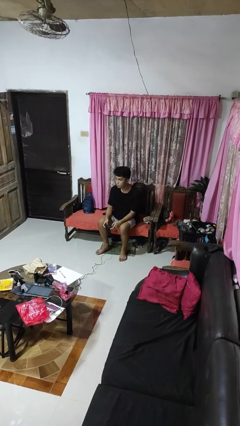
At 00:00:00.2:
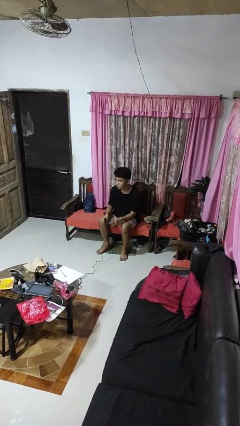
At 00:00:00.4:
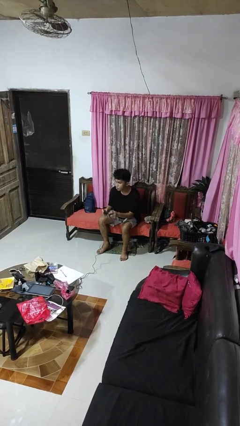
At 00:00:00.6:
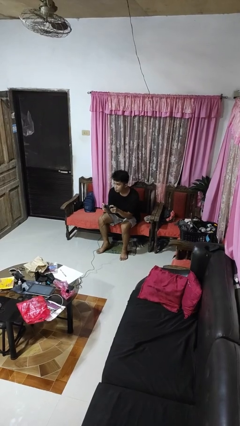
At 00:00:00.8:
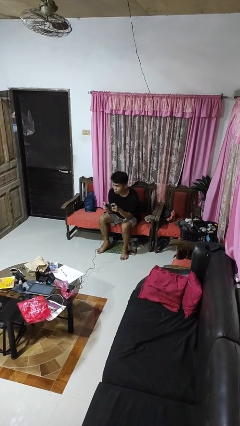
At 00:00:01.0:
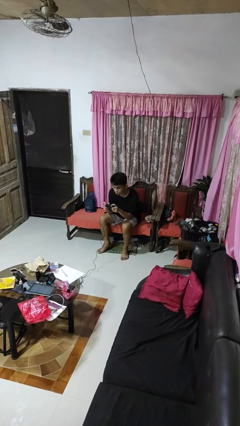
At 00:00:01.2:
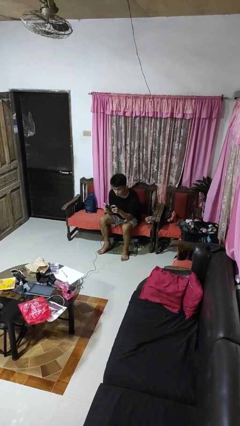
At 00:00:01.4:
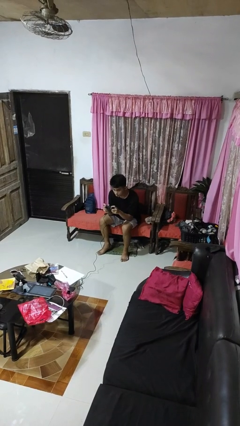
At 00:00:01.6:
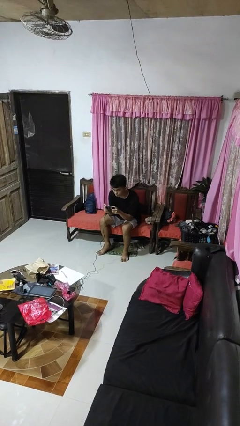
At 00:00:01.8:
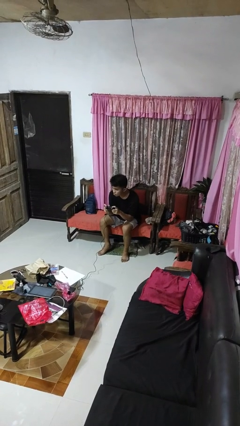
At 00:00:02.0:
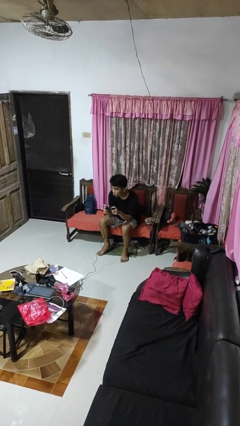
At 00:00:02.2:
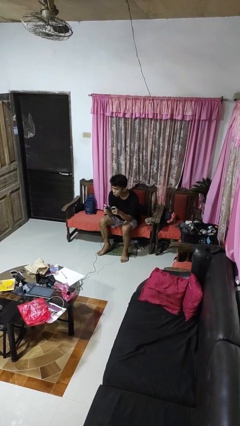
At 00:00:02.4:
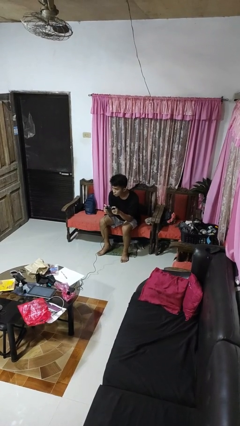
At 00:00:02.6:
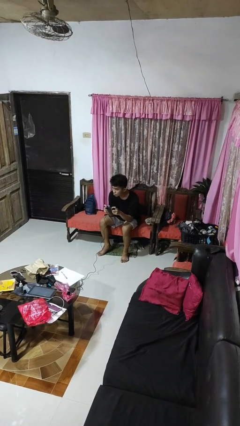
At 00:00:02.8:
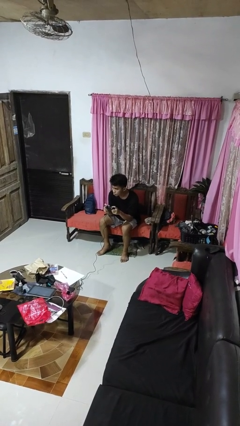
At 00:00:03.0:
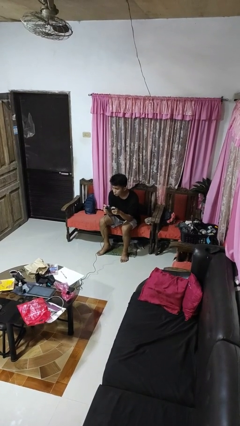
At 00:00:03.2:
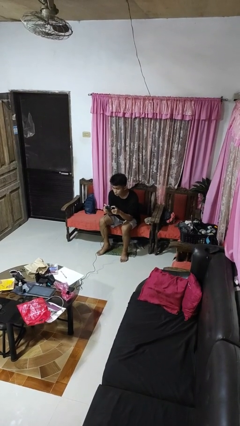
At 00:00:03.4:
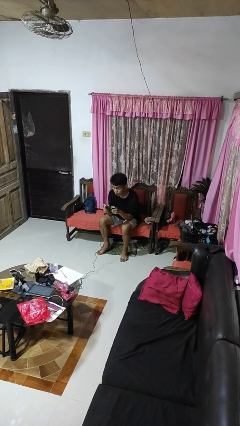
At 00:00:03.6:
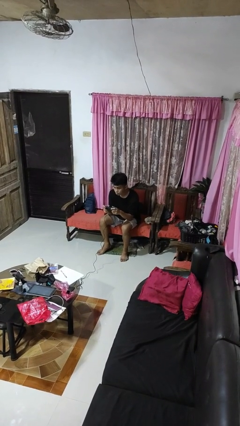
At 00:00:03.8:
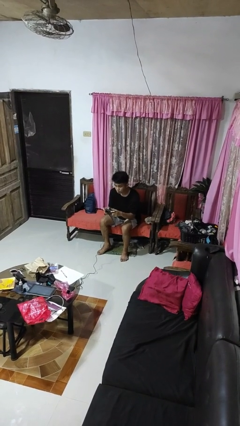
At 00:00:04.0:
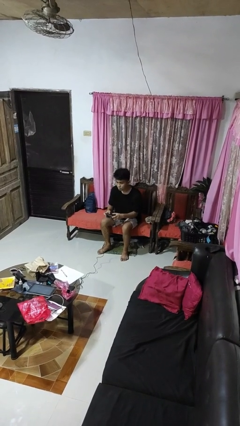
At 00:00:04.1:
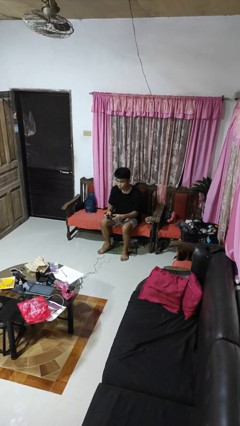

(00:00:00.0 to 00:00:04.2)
person interacts with handheld game

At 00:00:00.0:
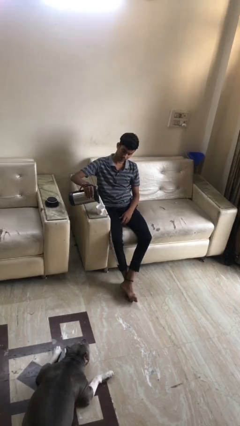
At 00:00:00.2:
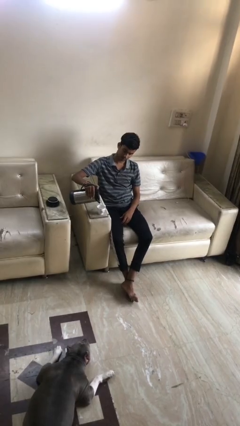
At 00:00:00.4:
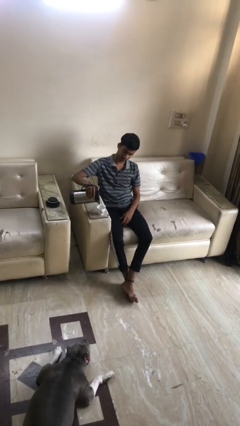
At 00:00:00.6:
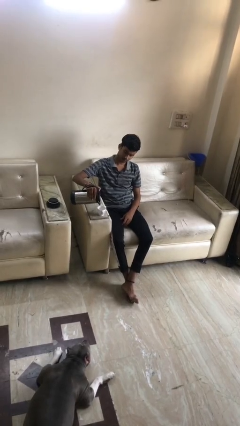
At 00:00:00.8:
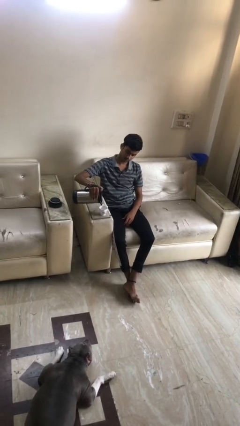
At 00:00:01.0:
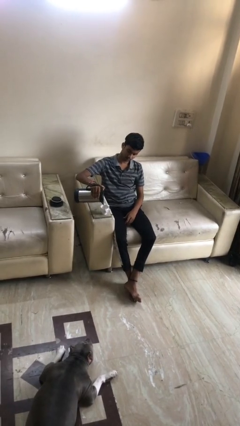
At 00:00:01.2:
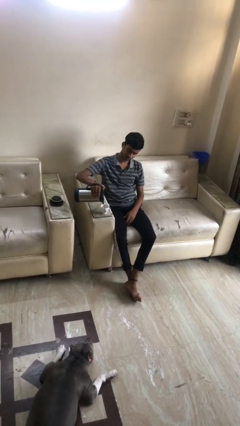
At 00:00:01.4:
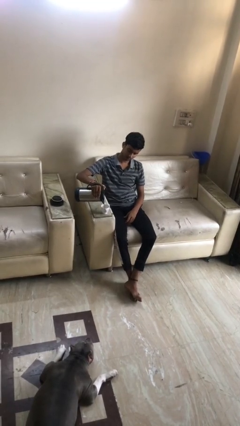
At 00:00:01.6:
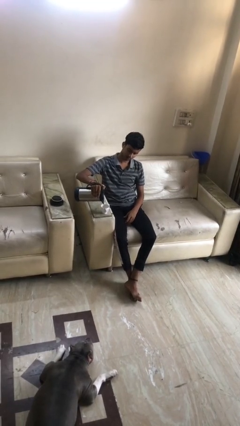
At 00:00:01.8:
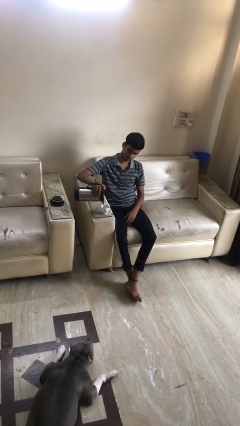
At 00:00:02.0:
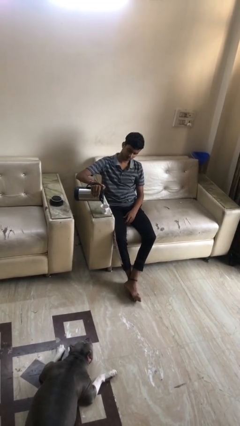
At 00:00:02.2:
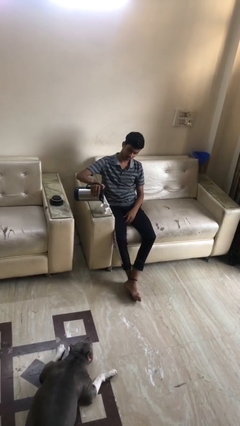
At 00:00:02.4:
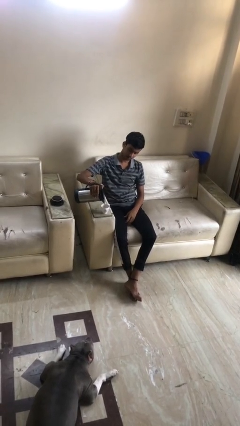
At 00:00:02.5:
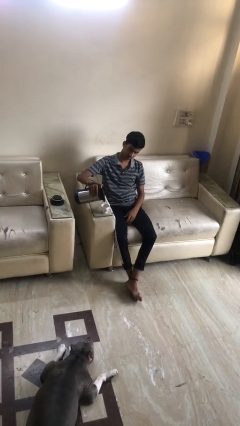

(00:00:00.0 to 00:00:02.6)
person pours coffee into mug

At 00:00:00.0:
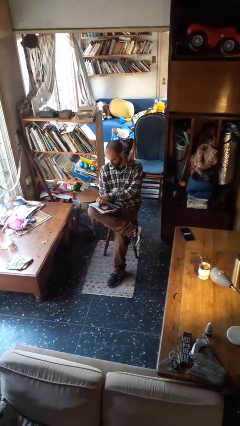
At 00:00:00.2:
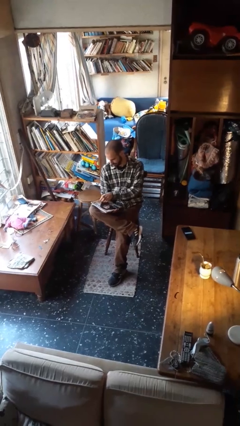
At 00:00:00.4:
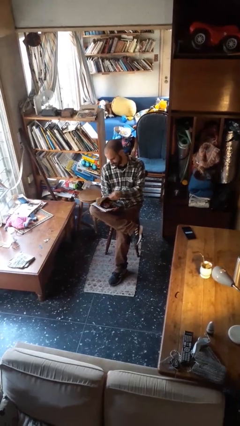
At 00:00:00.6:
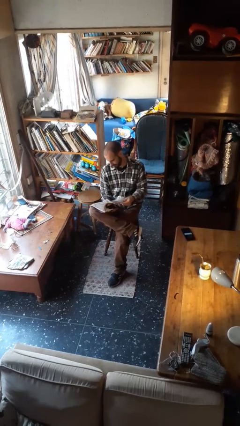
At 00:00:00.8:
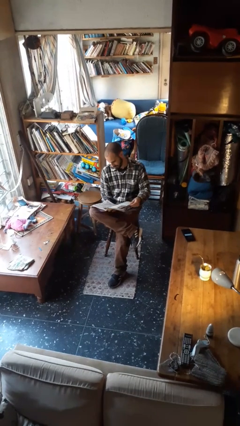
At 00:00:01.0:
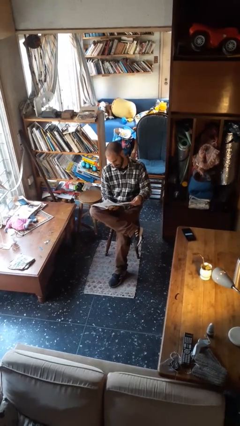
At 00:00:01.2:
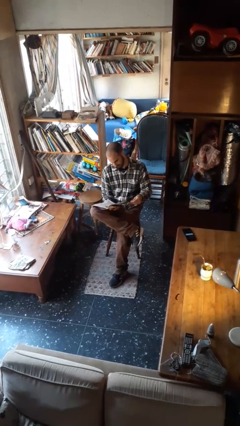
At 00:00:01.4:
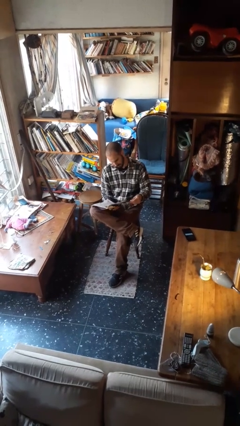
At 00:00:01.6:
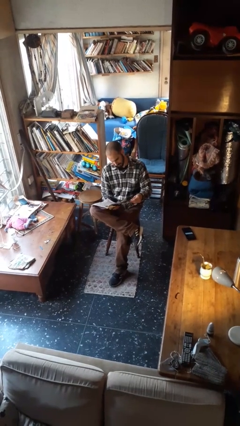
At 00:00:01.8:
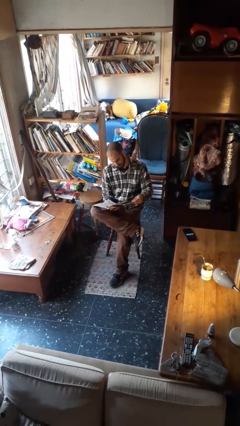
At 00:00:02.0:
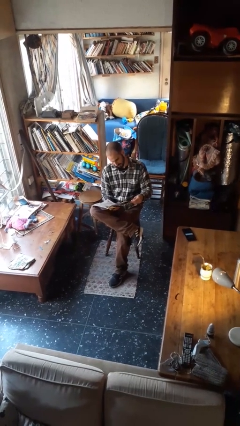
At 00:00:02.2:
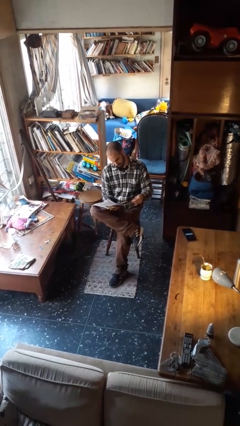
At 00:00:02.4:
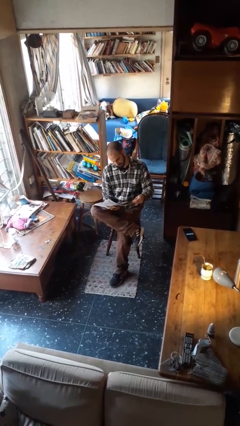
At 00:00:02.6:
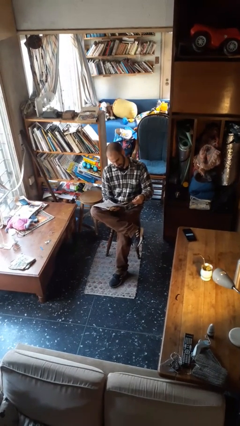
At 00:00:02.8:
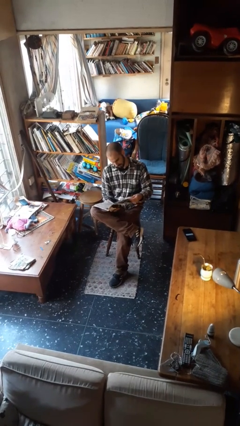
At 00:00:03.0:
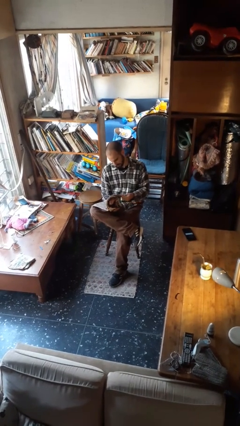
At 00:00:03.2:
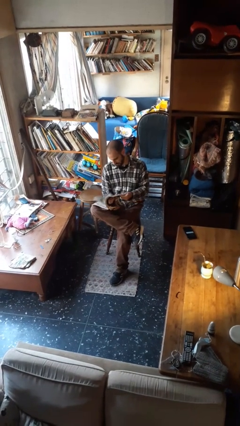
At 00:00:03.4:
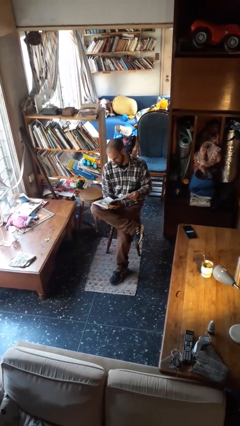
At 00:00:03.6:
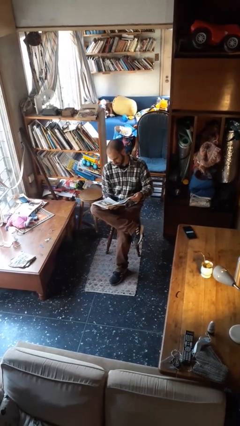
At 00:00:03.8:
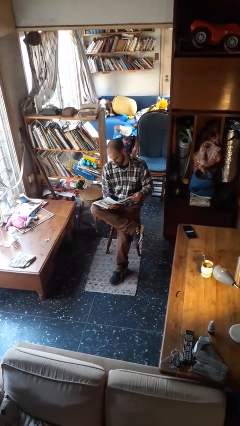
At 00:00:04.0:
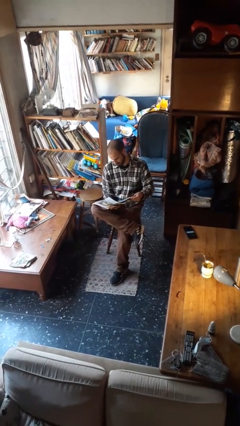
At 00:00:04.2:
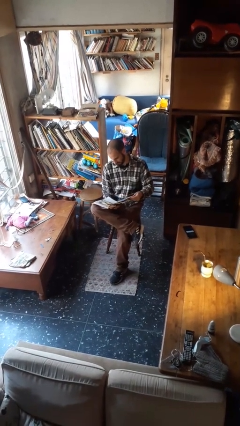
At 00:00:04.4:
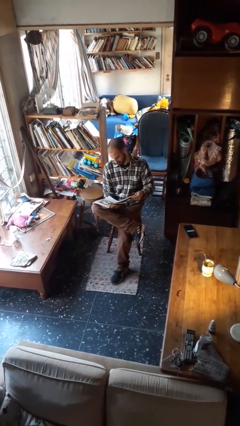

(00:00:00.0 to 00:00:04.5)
person reads magazine

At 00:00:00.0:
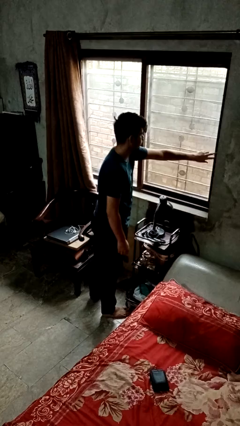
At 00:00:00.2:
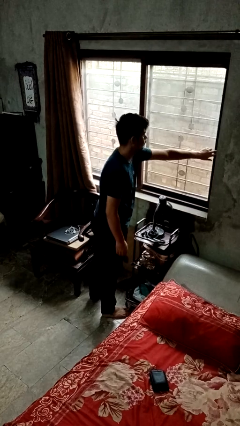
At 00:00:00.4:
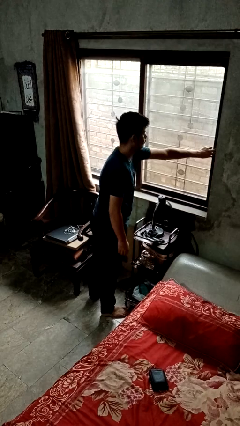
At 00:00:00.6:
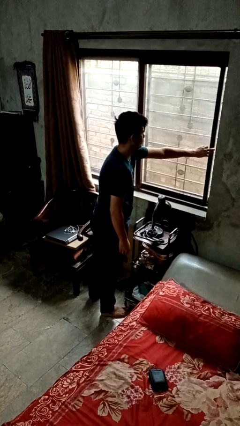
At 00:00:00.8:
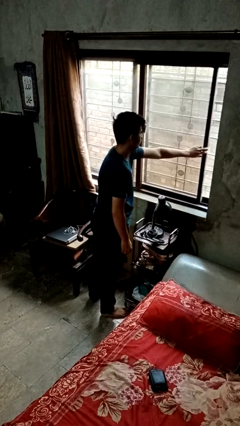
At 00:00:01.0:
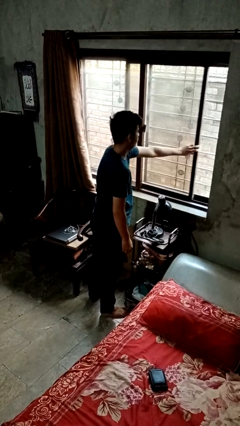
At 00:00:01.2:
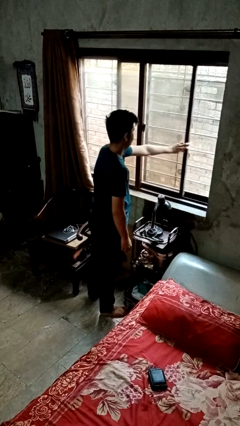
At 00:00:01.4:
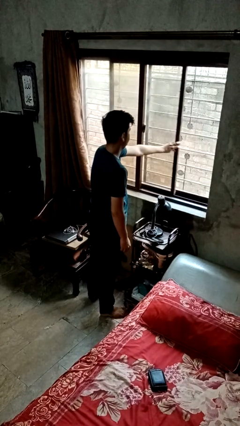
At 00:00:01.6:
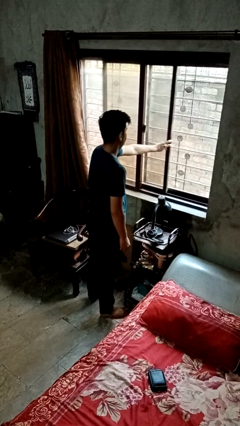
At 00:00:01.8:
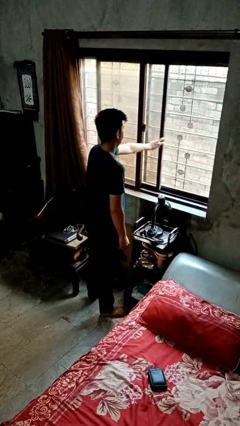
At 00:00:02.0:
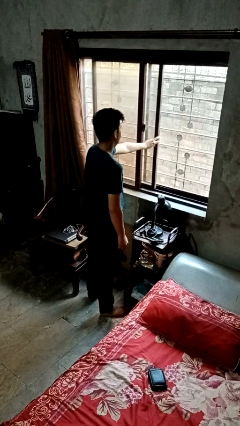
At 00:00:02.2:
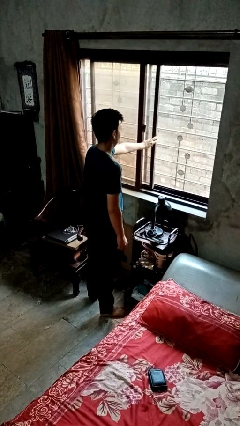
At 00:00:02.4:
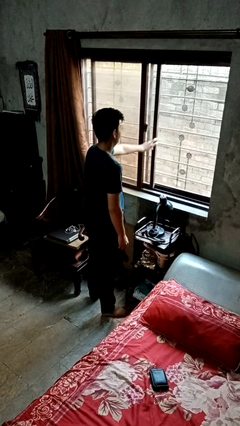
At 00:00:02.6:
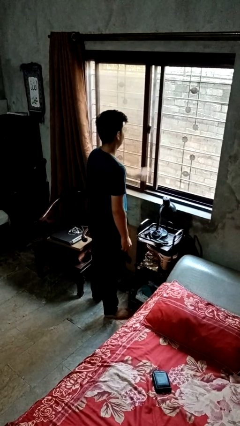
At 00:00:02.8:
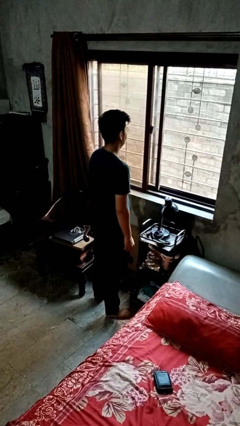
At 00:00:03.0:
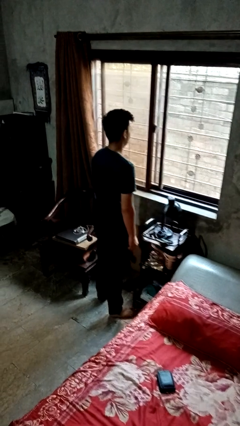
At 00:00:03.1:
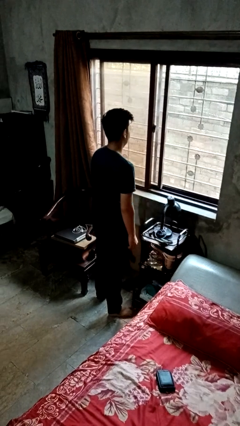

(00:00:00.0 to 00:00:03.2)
person opens home window

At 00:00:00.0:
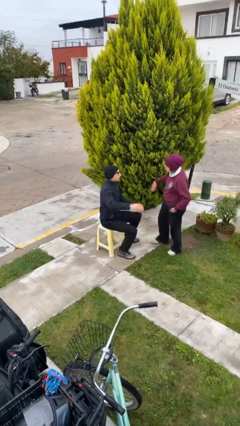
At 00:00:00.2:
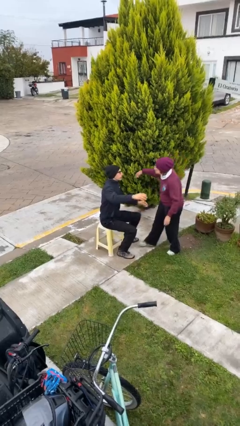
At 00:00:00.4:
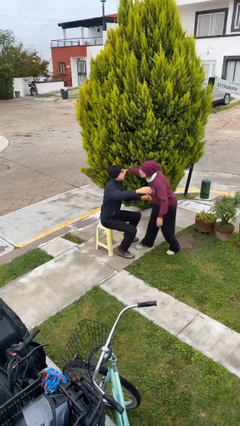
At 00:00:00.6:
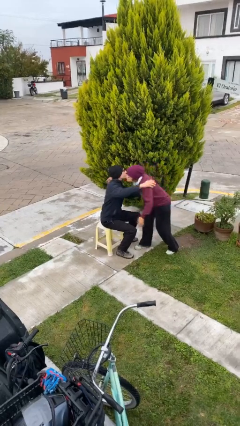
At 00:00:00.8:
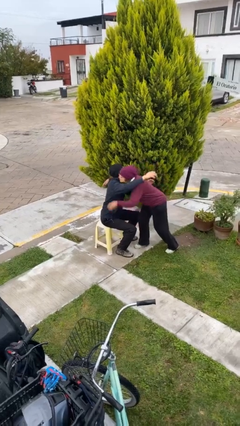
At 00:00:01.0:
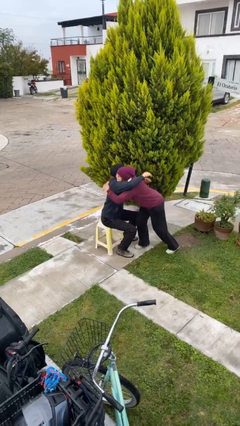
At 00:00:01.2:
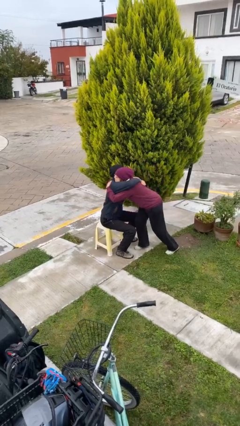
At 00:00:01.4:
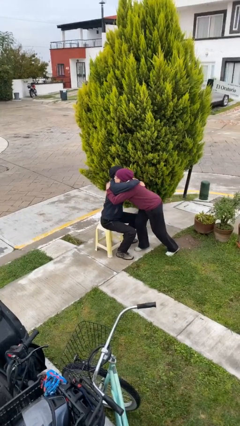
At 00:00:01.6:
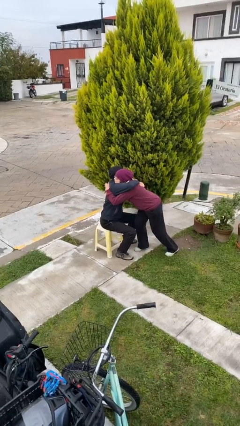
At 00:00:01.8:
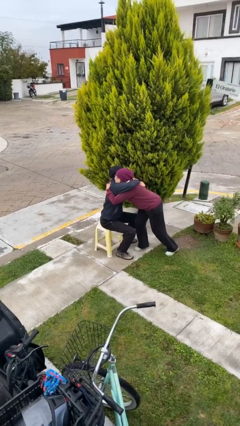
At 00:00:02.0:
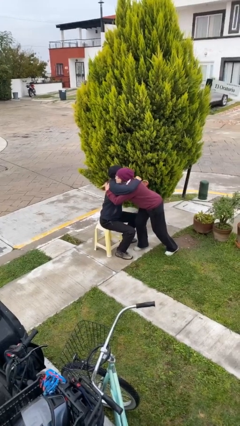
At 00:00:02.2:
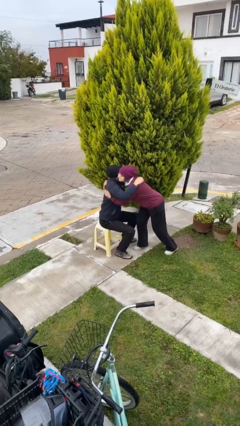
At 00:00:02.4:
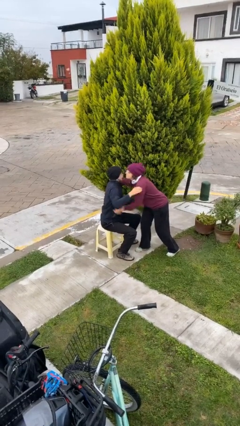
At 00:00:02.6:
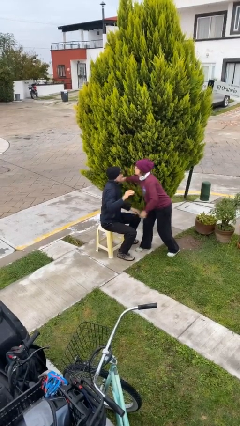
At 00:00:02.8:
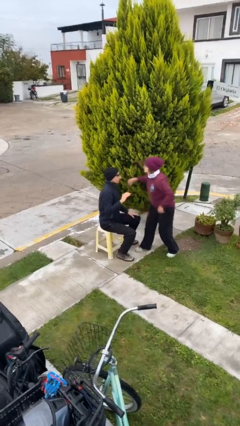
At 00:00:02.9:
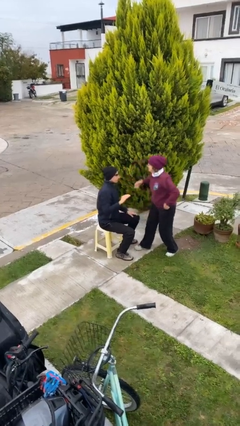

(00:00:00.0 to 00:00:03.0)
person embraces person
